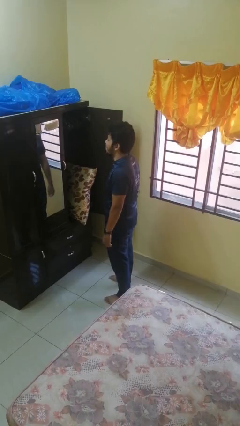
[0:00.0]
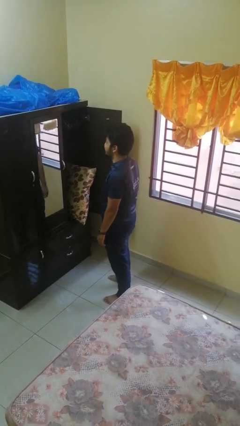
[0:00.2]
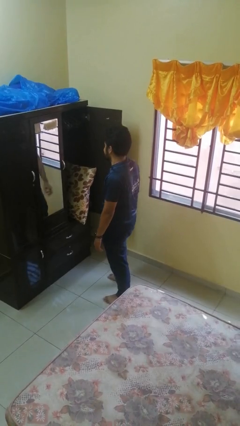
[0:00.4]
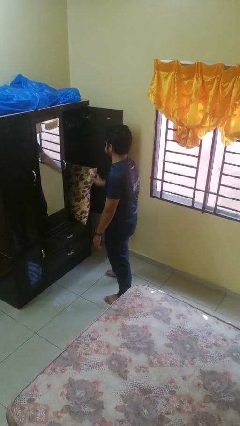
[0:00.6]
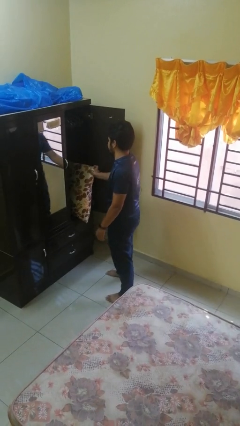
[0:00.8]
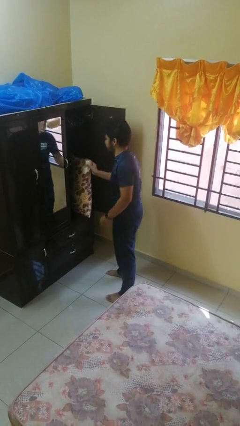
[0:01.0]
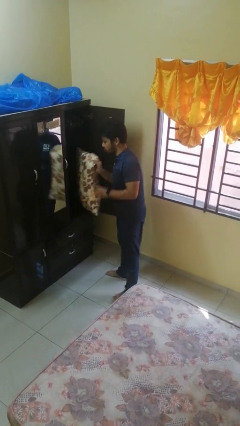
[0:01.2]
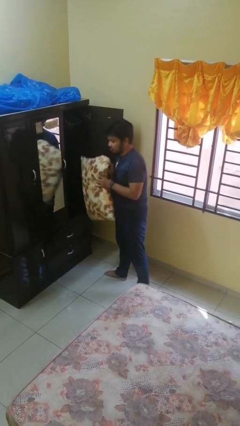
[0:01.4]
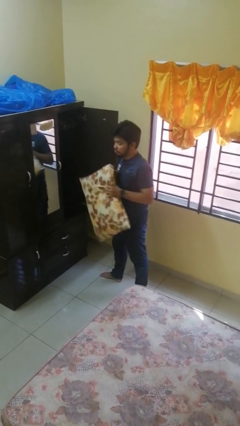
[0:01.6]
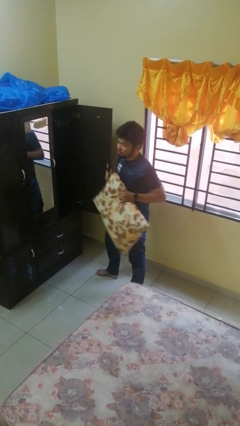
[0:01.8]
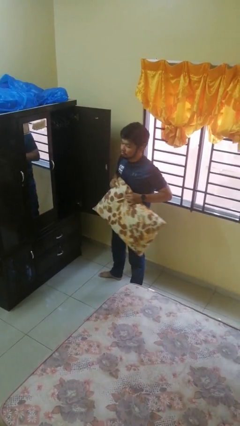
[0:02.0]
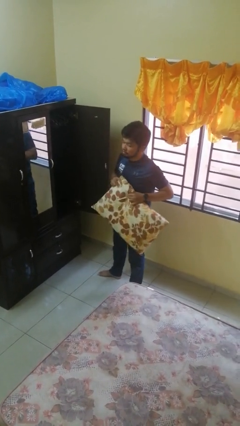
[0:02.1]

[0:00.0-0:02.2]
person picks up object from cabinet

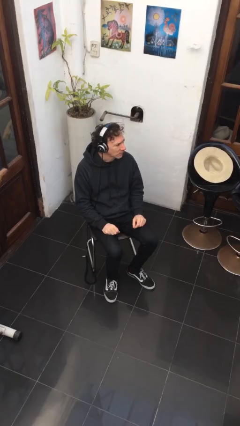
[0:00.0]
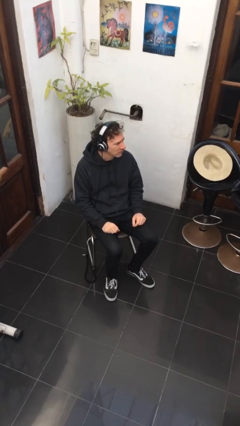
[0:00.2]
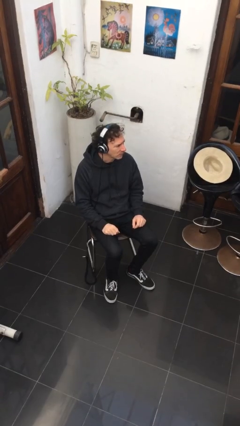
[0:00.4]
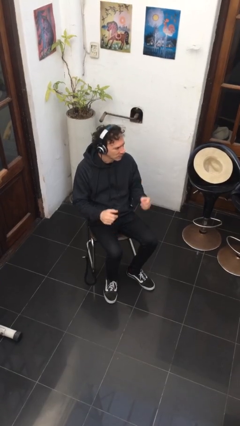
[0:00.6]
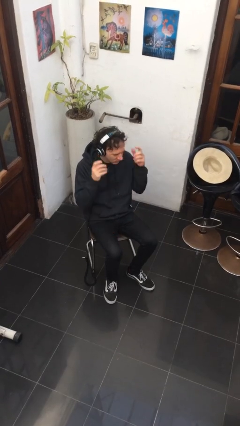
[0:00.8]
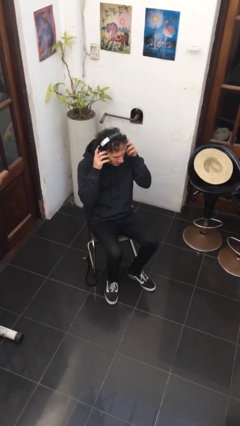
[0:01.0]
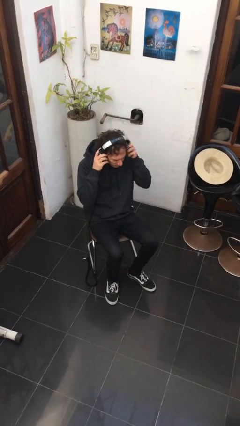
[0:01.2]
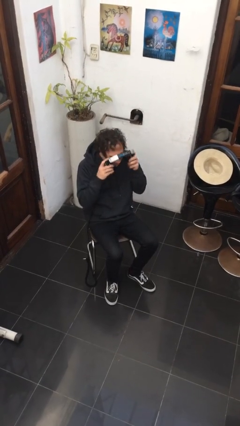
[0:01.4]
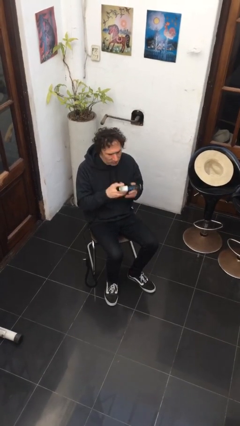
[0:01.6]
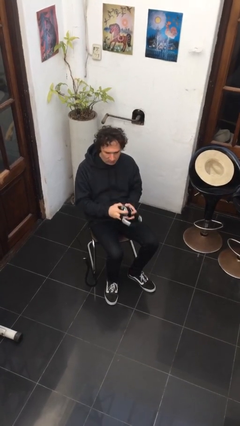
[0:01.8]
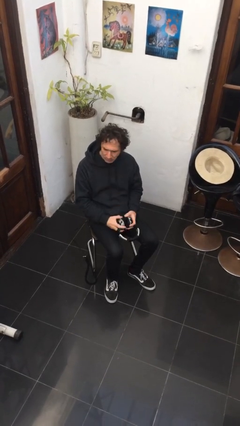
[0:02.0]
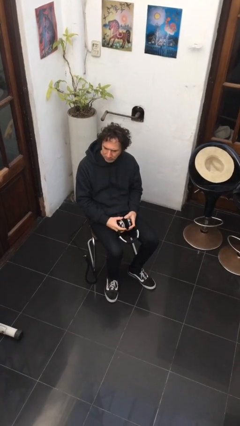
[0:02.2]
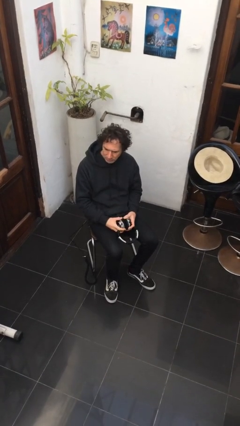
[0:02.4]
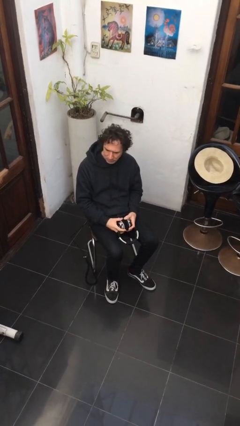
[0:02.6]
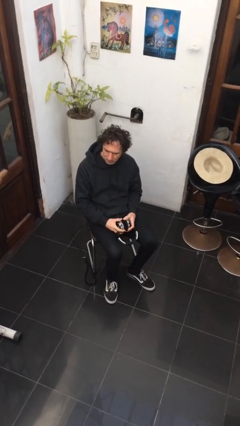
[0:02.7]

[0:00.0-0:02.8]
person takes off headphones

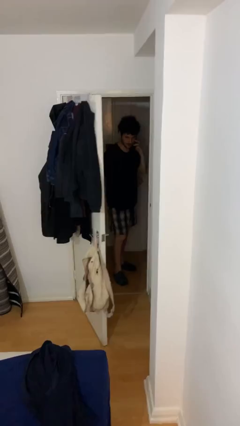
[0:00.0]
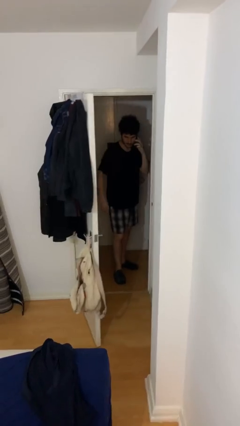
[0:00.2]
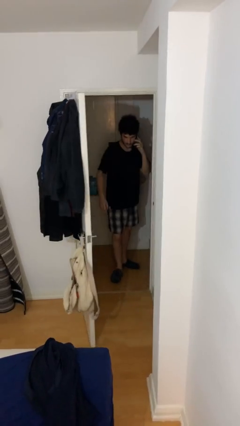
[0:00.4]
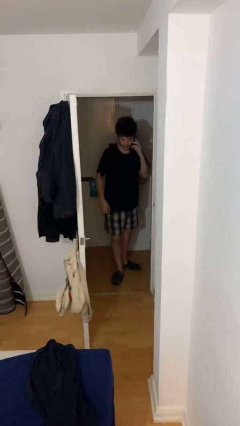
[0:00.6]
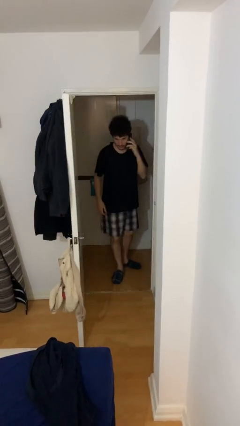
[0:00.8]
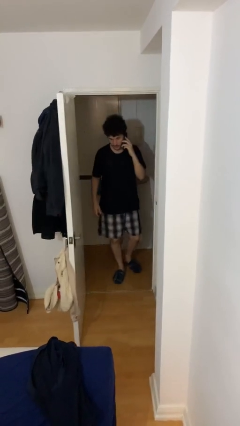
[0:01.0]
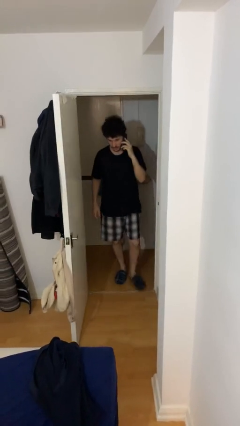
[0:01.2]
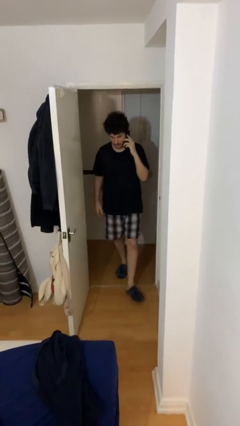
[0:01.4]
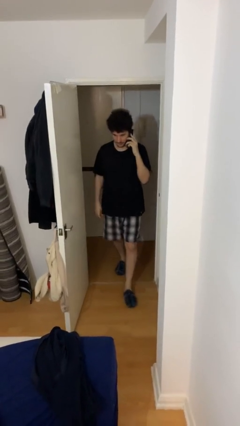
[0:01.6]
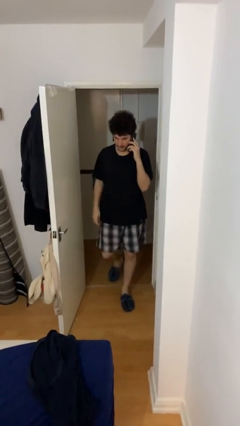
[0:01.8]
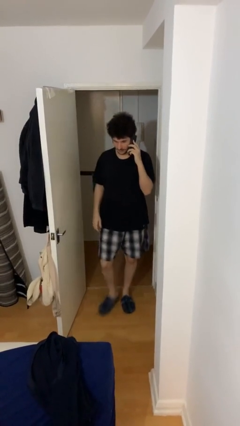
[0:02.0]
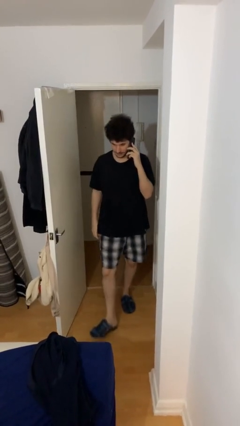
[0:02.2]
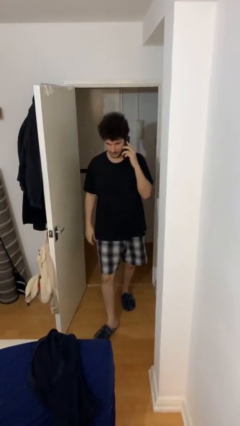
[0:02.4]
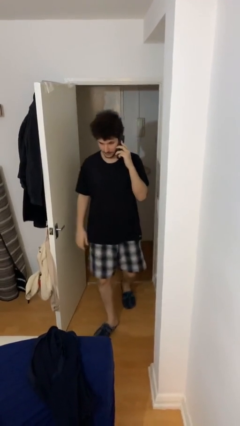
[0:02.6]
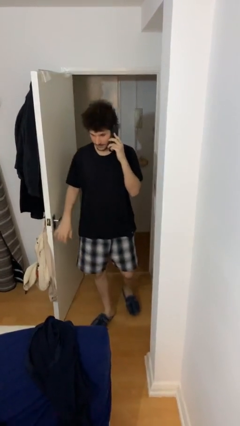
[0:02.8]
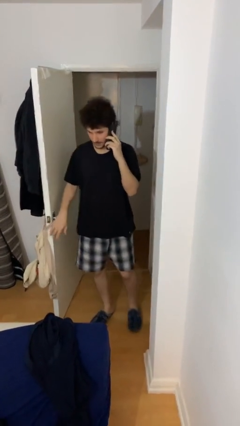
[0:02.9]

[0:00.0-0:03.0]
person enters scene through structure

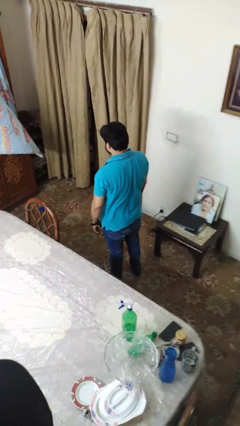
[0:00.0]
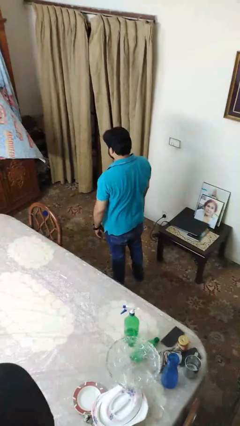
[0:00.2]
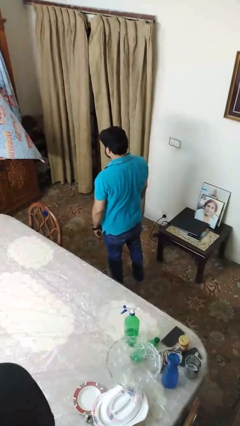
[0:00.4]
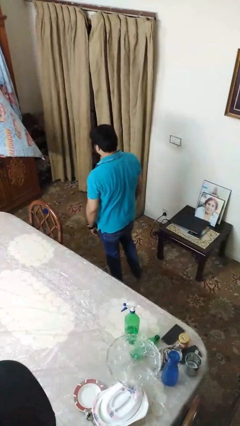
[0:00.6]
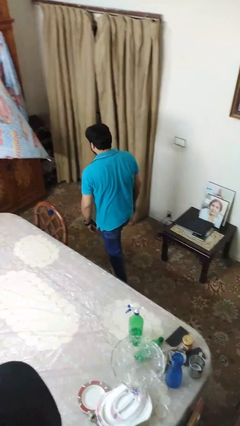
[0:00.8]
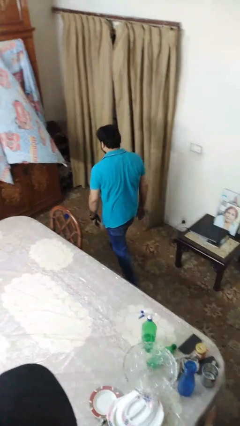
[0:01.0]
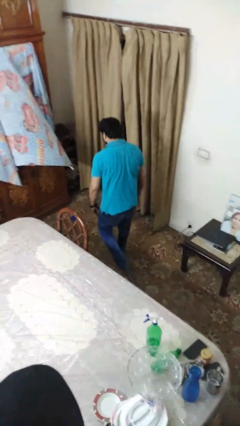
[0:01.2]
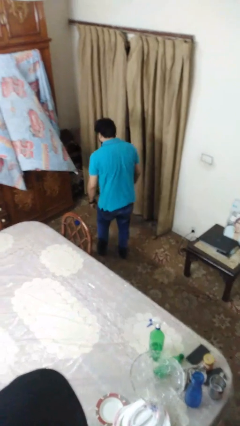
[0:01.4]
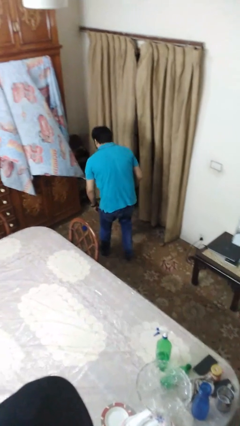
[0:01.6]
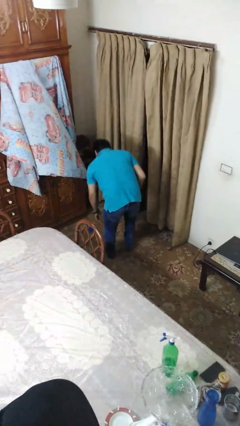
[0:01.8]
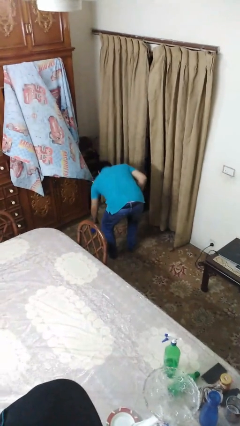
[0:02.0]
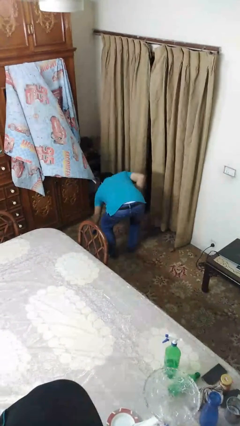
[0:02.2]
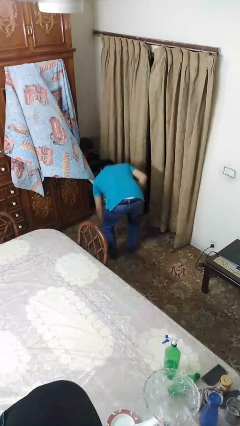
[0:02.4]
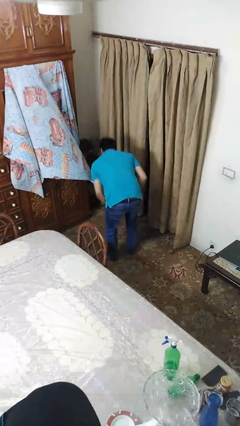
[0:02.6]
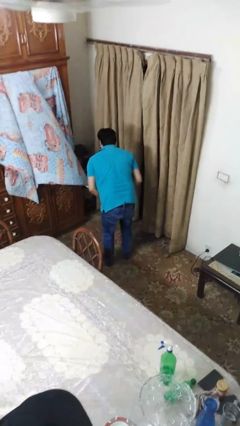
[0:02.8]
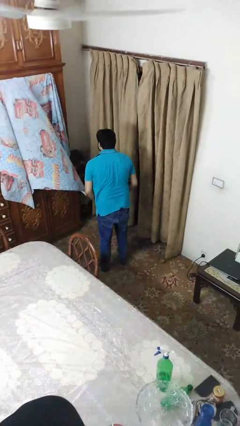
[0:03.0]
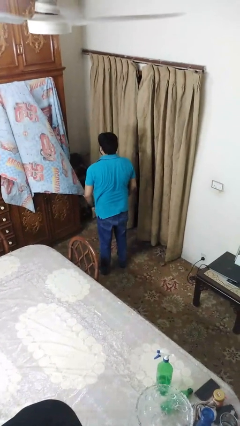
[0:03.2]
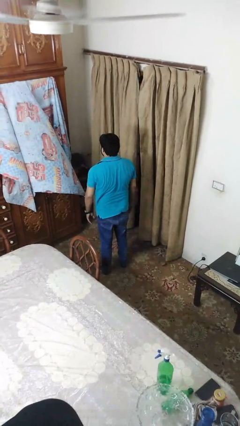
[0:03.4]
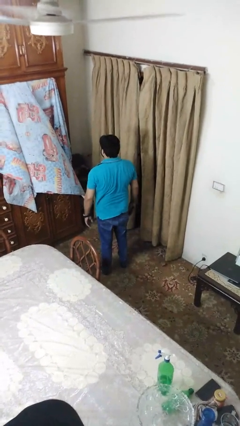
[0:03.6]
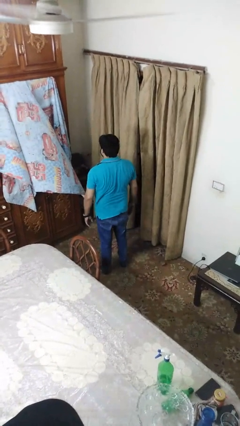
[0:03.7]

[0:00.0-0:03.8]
person picks up object from floor

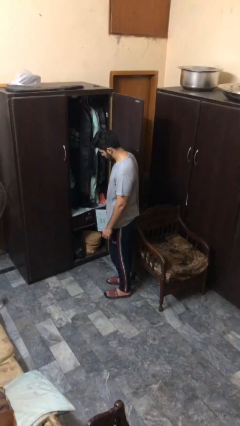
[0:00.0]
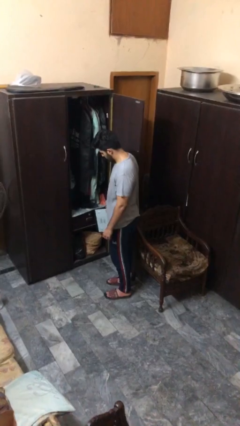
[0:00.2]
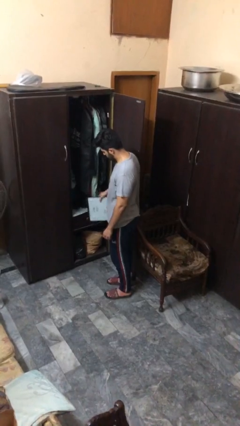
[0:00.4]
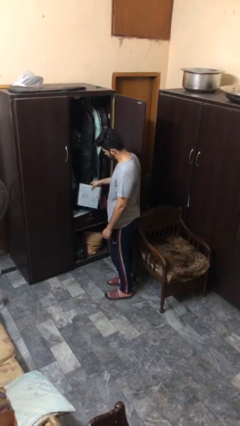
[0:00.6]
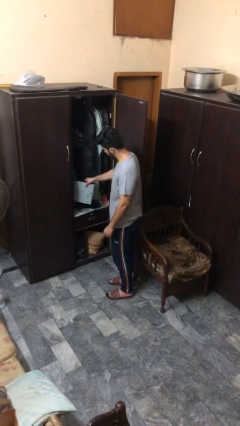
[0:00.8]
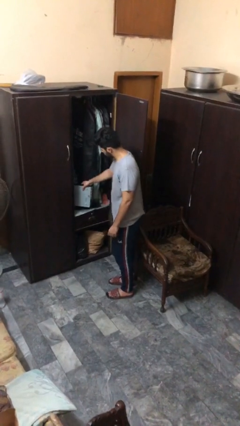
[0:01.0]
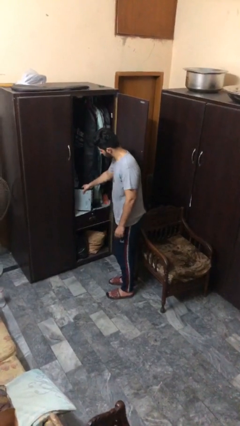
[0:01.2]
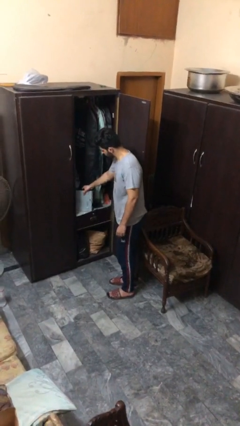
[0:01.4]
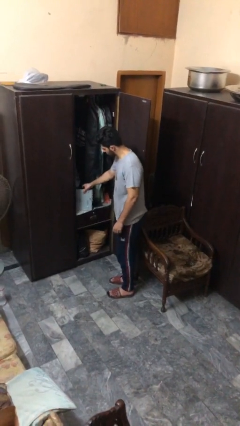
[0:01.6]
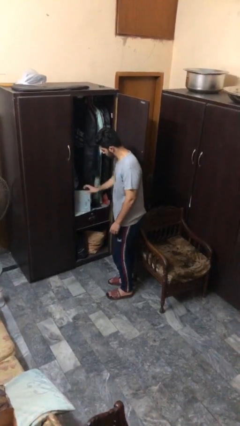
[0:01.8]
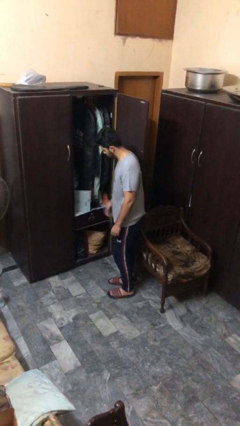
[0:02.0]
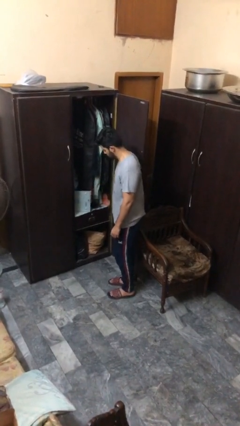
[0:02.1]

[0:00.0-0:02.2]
person puts down object on countertop

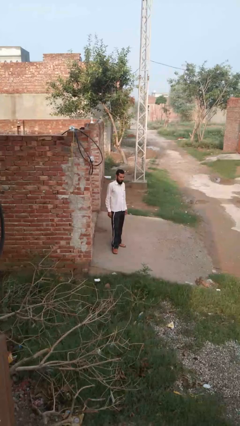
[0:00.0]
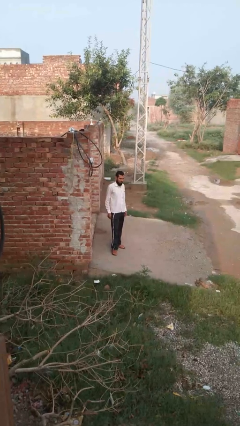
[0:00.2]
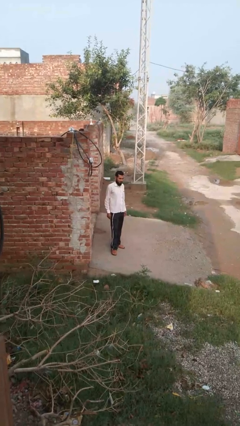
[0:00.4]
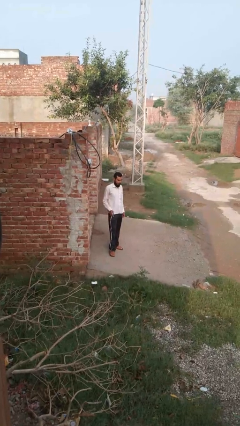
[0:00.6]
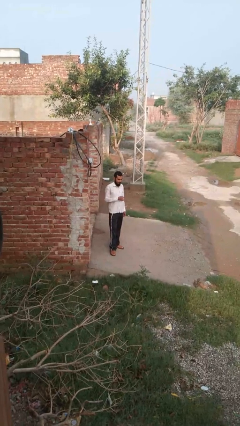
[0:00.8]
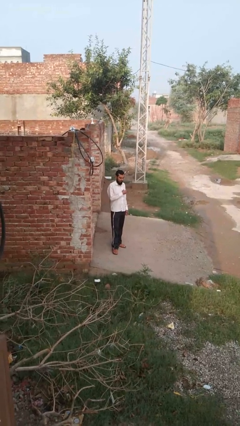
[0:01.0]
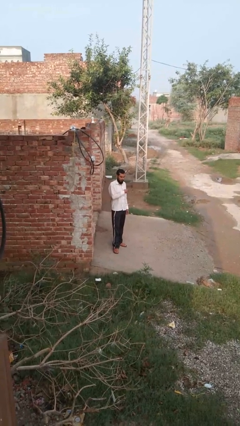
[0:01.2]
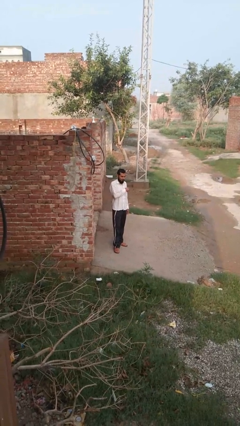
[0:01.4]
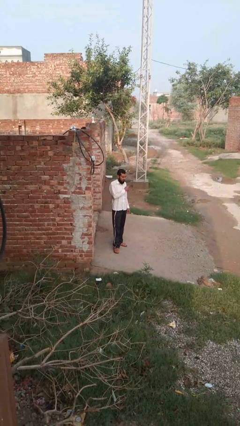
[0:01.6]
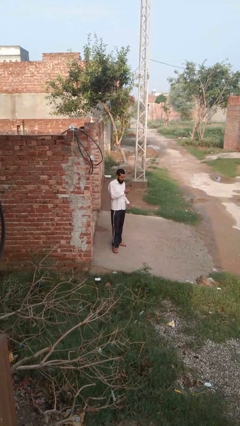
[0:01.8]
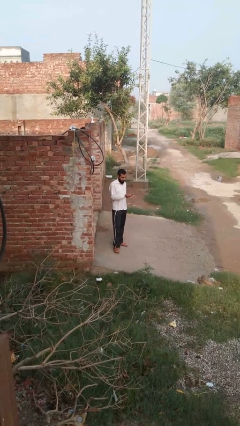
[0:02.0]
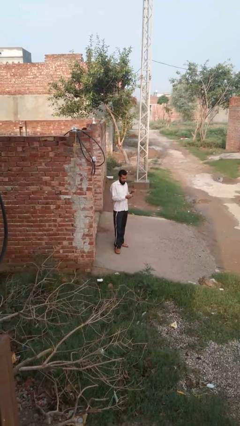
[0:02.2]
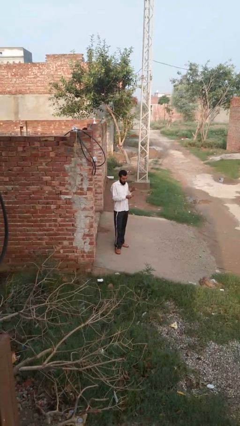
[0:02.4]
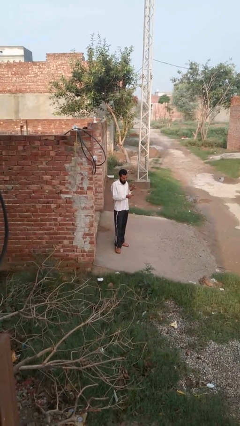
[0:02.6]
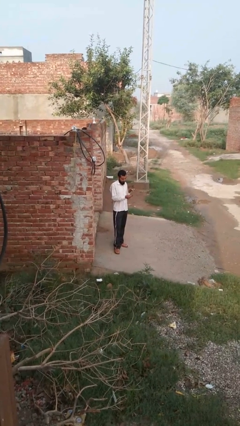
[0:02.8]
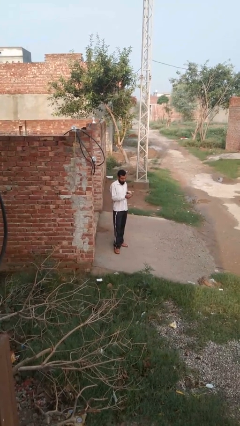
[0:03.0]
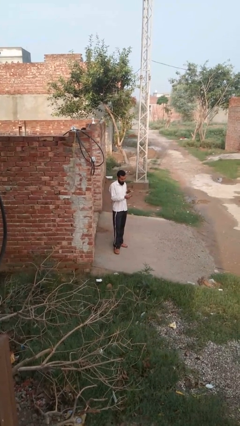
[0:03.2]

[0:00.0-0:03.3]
person takes phone from pocket
